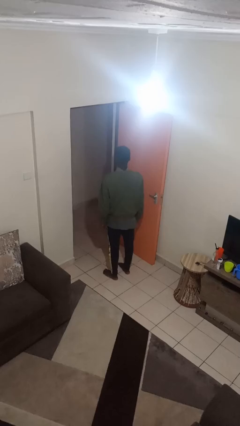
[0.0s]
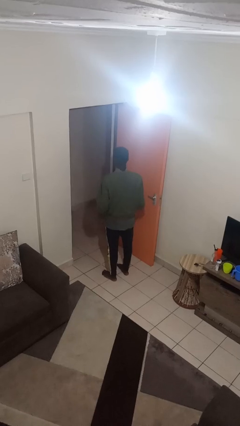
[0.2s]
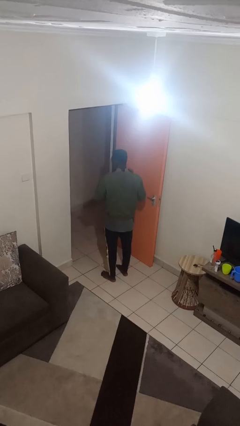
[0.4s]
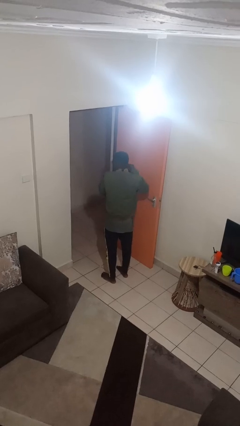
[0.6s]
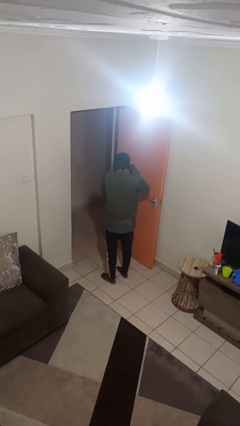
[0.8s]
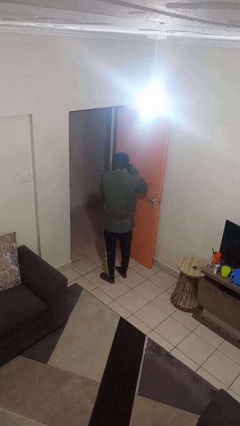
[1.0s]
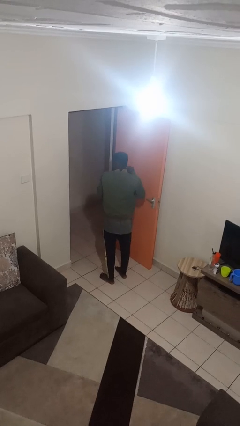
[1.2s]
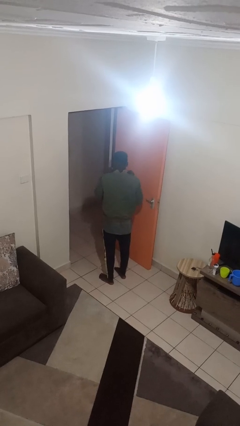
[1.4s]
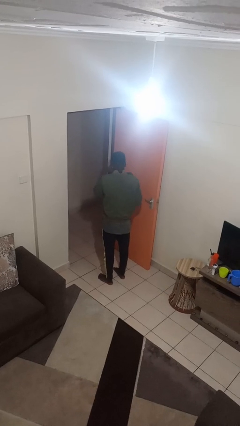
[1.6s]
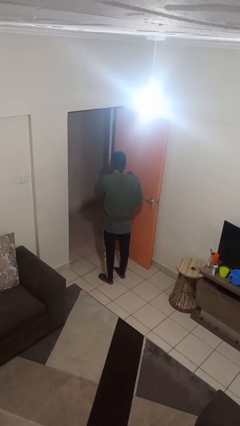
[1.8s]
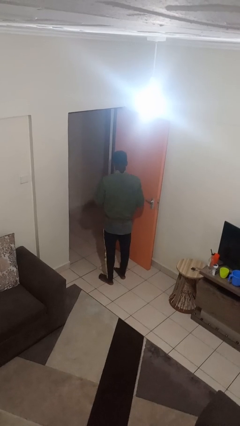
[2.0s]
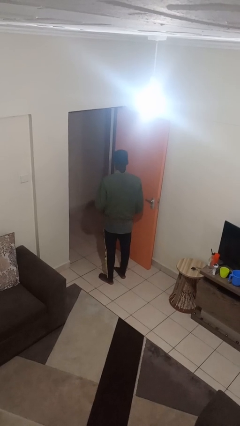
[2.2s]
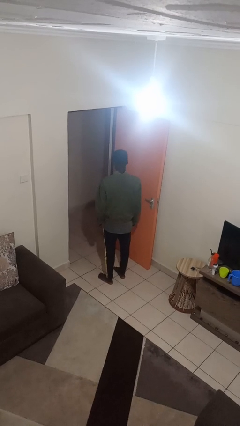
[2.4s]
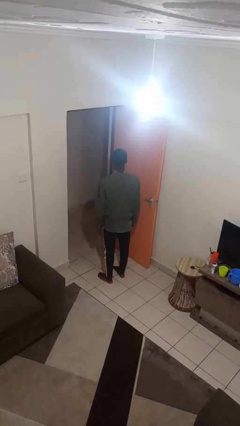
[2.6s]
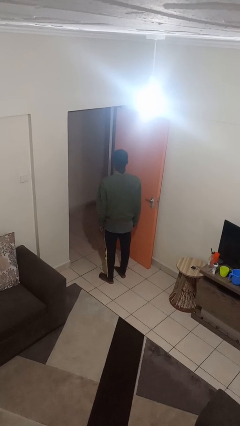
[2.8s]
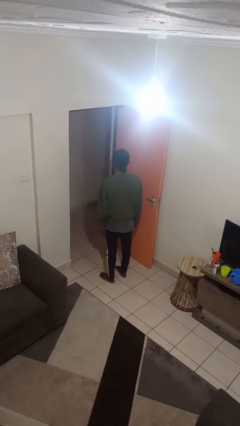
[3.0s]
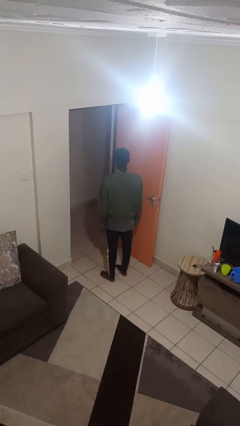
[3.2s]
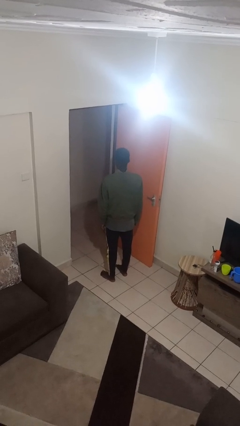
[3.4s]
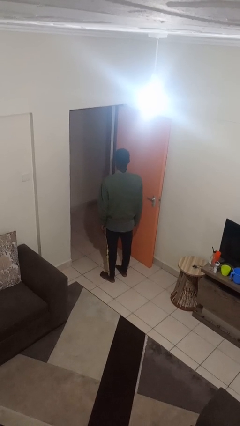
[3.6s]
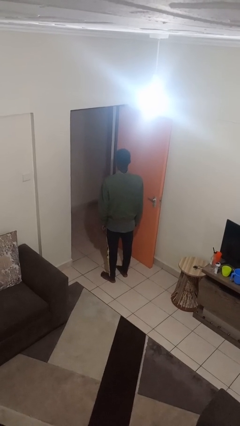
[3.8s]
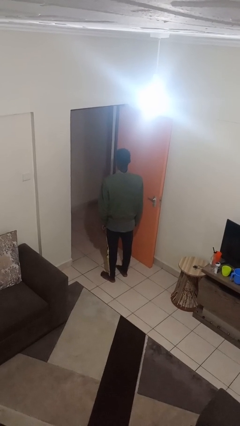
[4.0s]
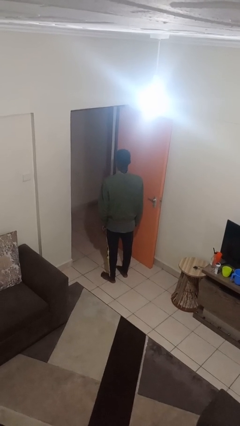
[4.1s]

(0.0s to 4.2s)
person puts on earrings

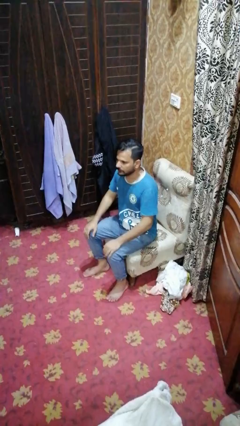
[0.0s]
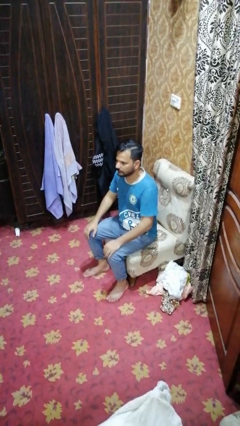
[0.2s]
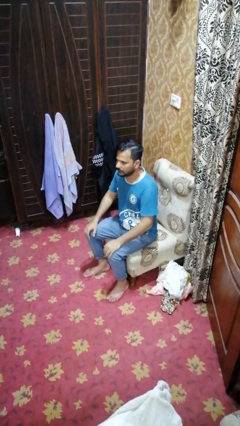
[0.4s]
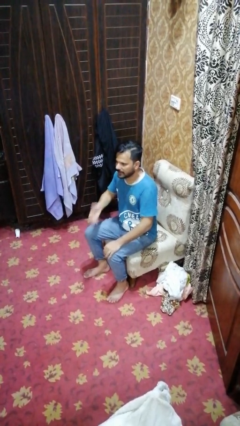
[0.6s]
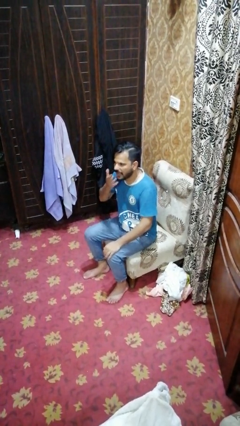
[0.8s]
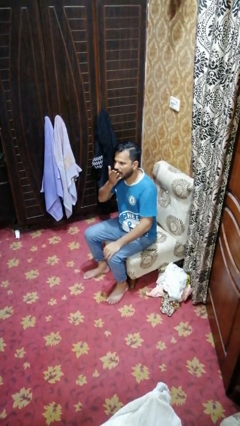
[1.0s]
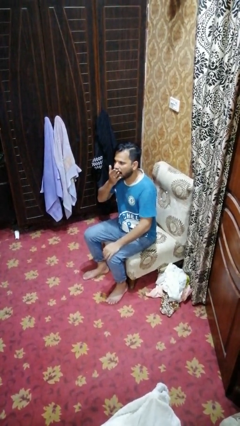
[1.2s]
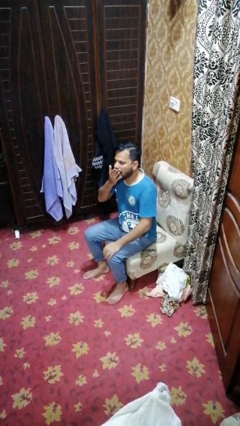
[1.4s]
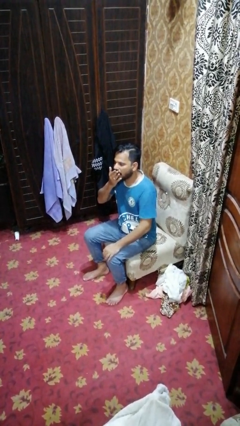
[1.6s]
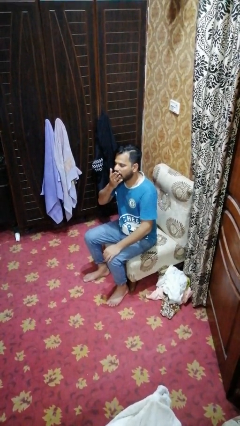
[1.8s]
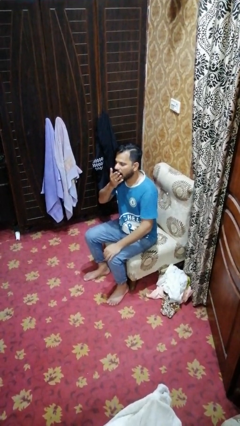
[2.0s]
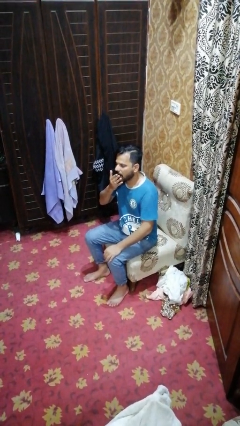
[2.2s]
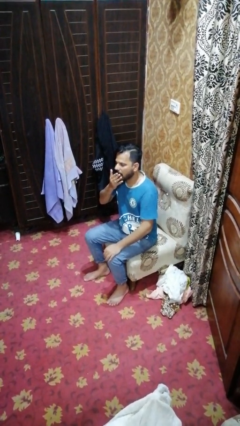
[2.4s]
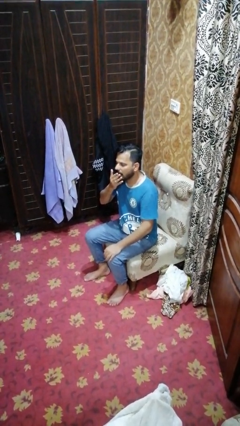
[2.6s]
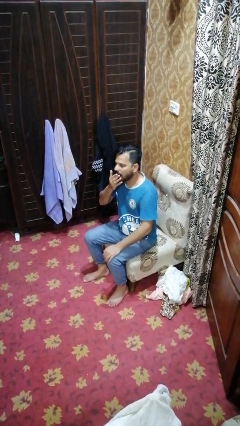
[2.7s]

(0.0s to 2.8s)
person yawns

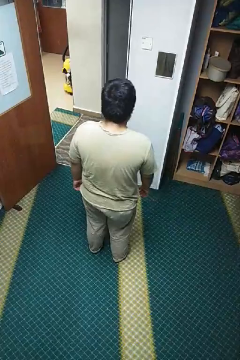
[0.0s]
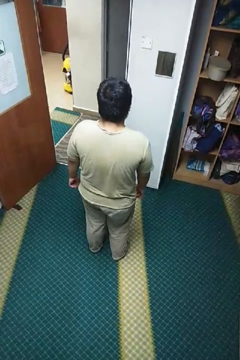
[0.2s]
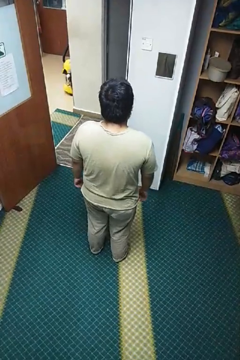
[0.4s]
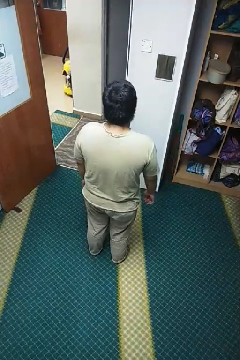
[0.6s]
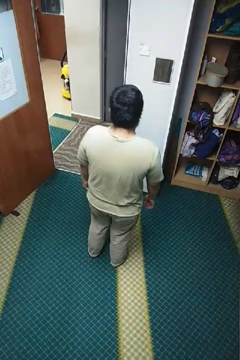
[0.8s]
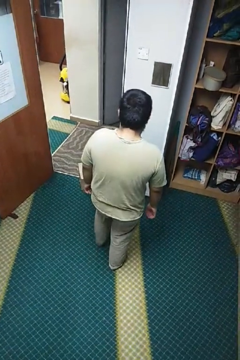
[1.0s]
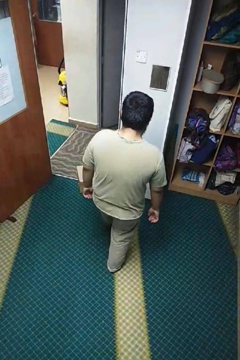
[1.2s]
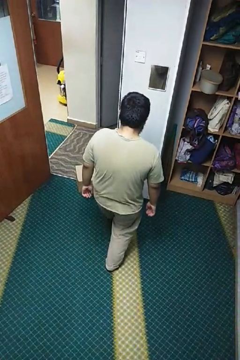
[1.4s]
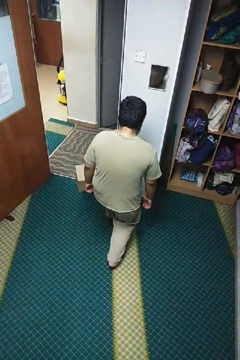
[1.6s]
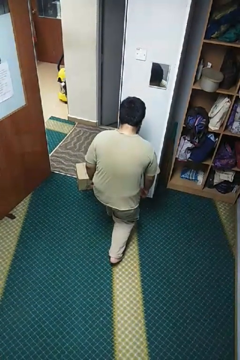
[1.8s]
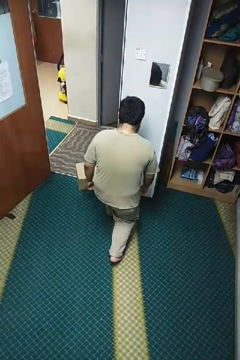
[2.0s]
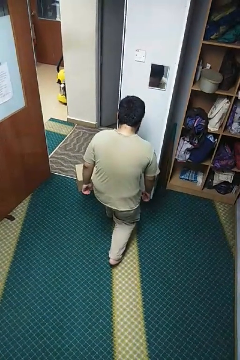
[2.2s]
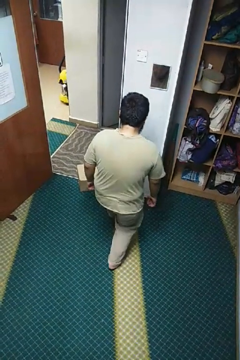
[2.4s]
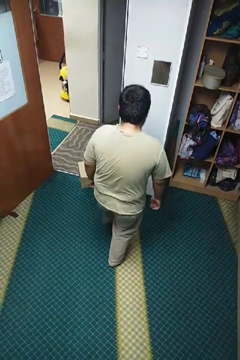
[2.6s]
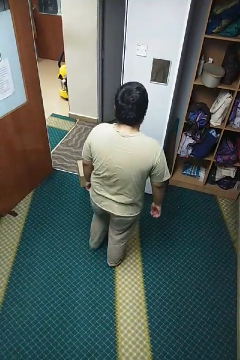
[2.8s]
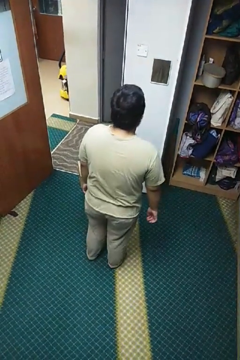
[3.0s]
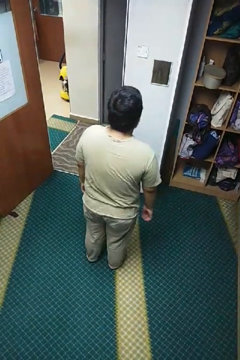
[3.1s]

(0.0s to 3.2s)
person exercises with lunges

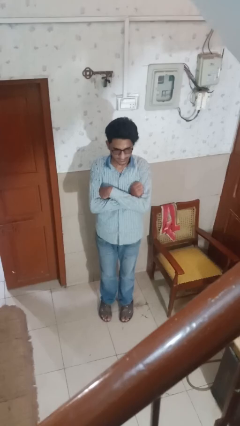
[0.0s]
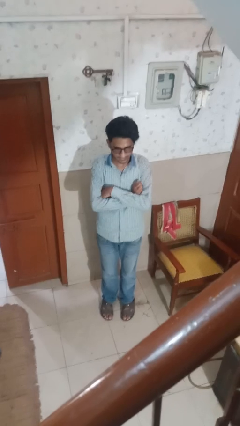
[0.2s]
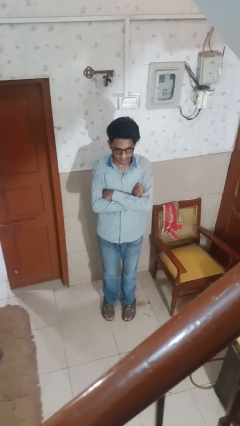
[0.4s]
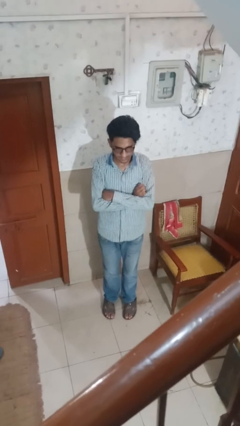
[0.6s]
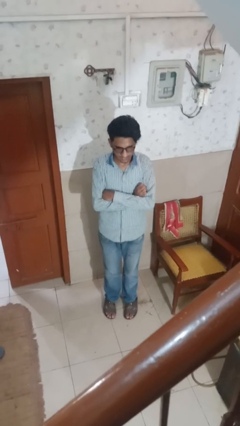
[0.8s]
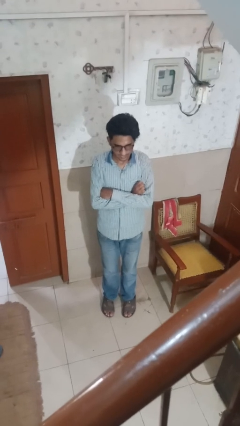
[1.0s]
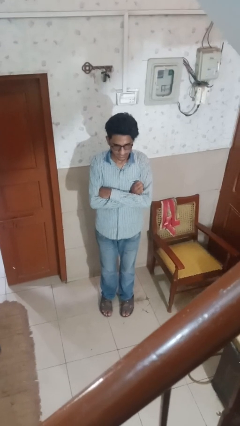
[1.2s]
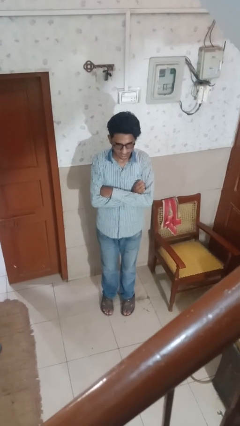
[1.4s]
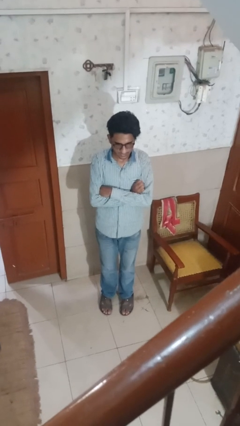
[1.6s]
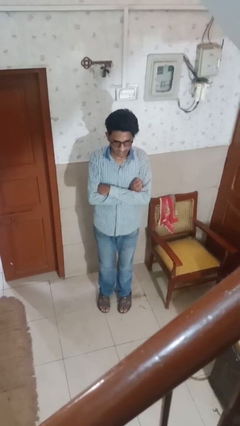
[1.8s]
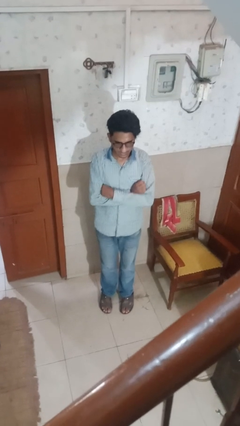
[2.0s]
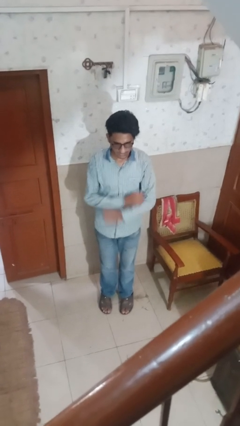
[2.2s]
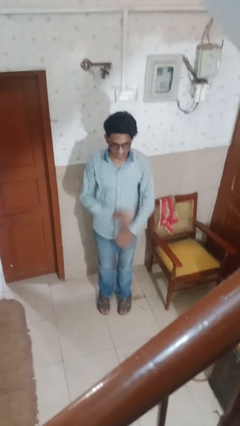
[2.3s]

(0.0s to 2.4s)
person crosses arms

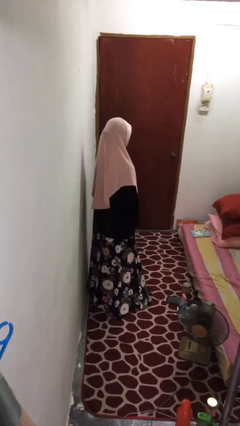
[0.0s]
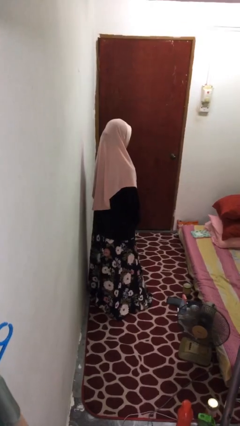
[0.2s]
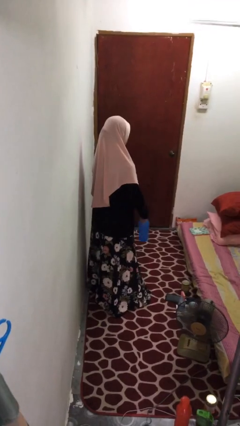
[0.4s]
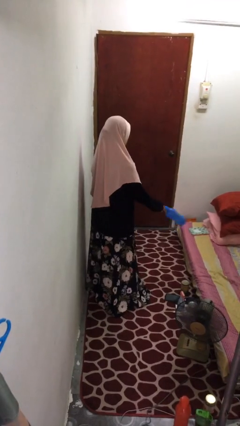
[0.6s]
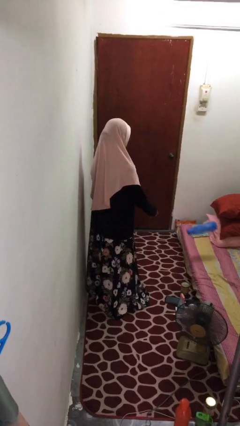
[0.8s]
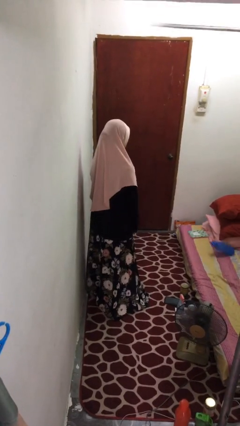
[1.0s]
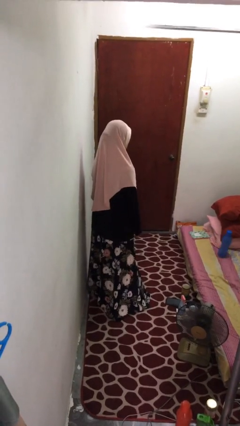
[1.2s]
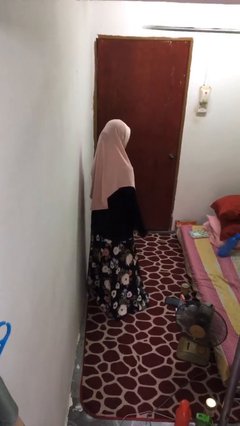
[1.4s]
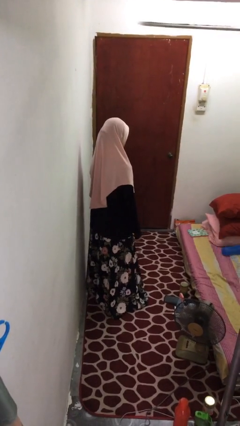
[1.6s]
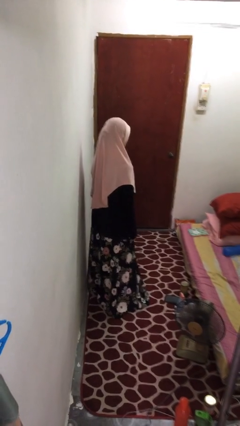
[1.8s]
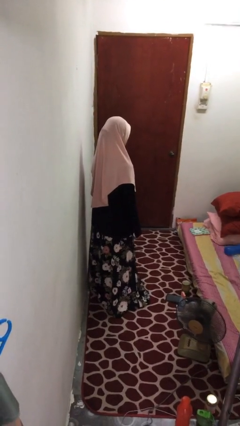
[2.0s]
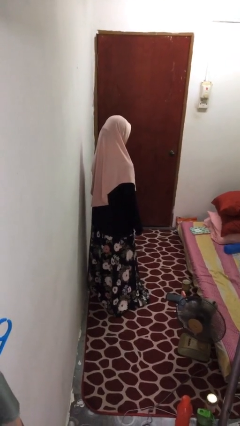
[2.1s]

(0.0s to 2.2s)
person throws object on bed

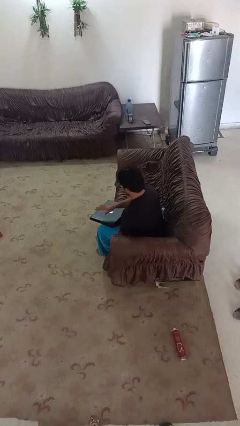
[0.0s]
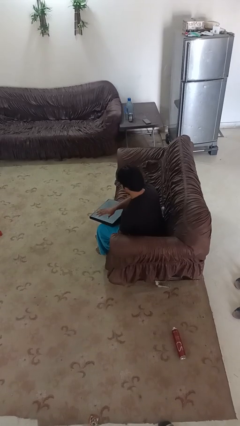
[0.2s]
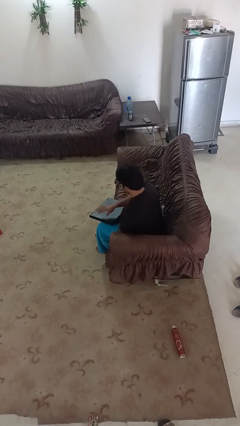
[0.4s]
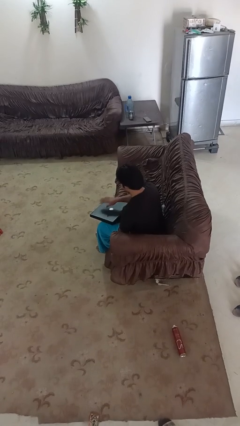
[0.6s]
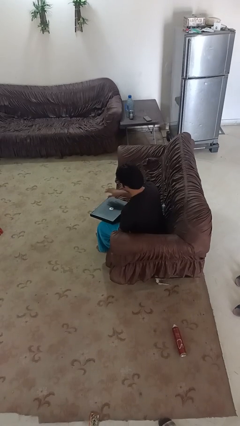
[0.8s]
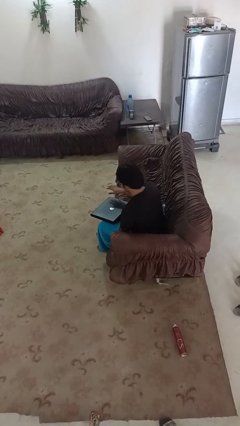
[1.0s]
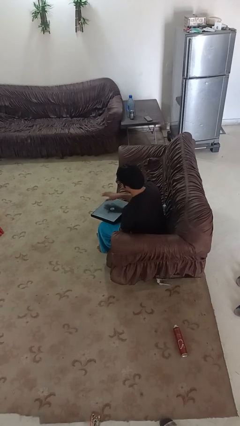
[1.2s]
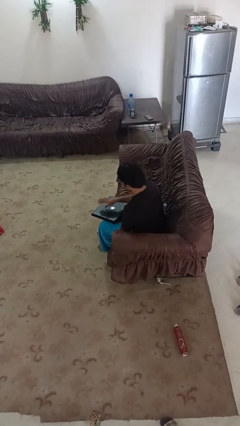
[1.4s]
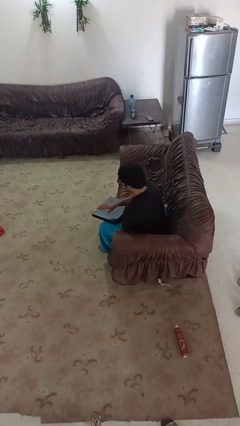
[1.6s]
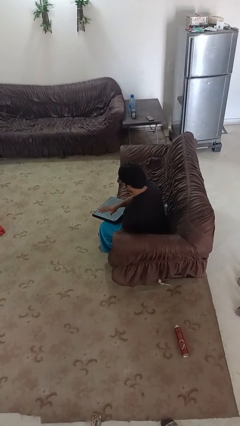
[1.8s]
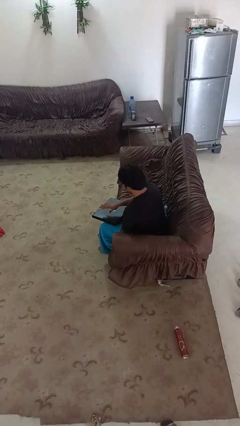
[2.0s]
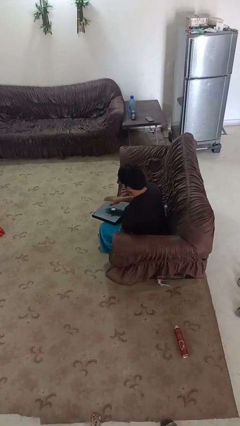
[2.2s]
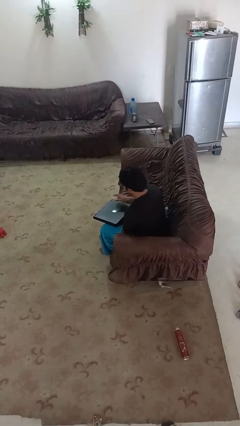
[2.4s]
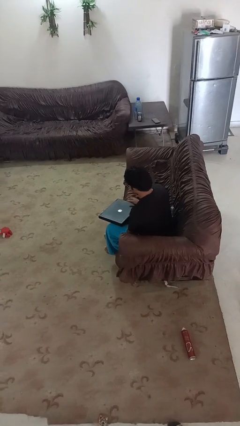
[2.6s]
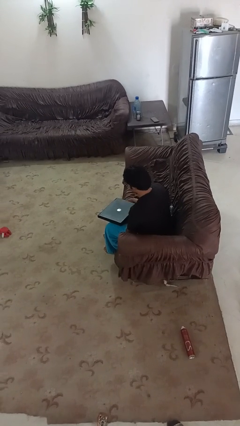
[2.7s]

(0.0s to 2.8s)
person waves hand over object

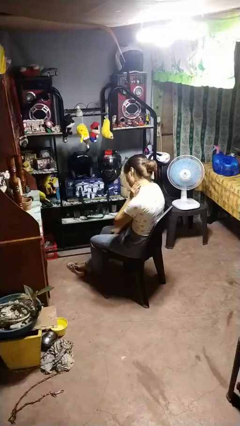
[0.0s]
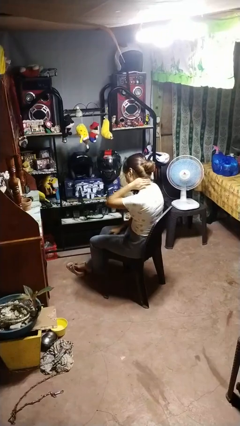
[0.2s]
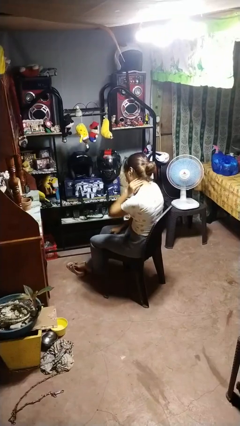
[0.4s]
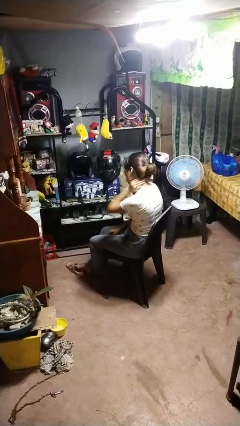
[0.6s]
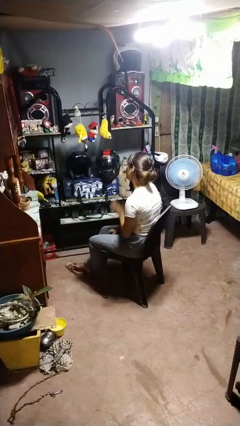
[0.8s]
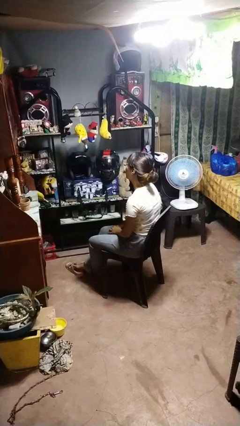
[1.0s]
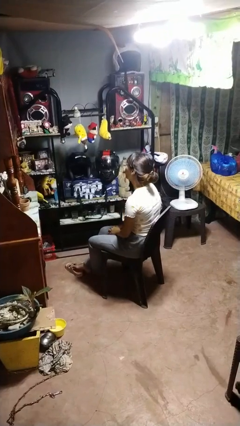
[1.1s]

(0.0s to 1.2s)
person rubs neck
